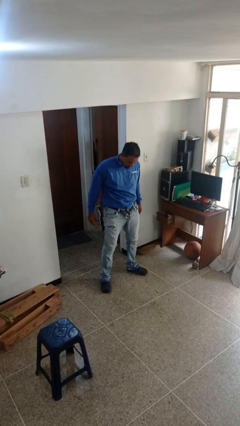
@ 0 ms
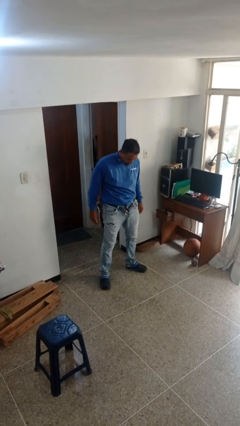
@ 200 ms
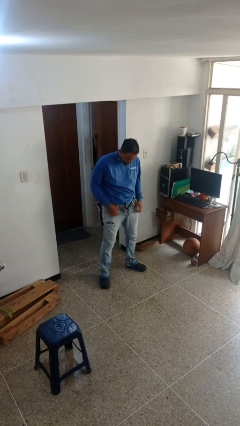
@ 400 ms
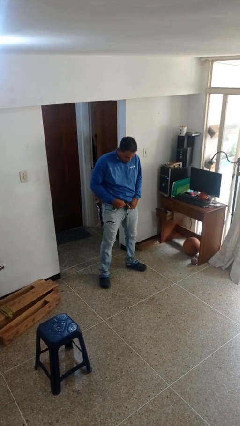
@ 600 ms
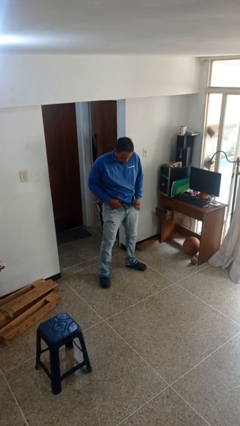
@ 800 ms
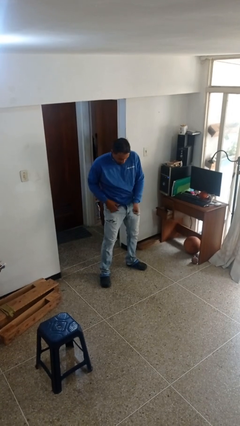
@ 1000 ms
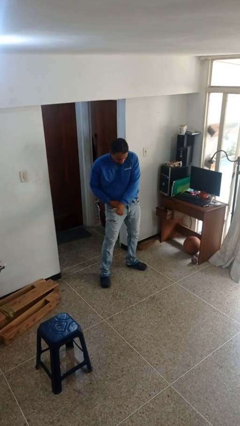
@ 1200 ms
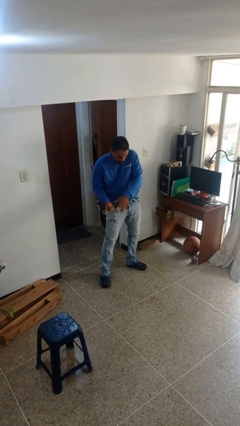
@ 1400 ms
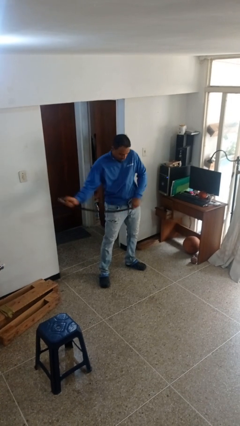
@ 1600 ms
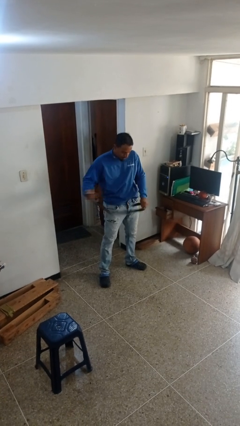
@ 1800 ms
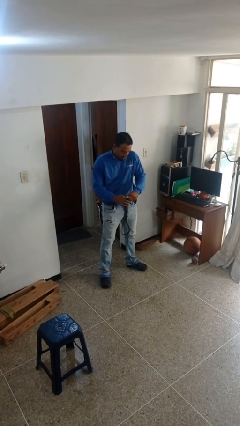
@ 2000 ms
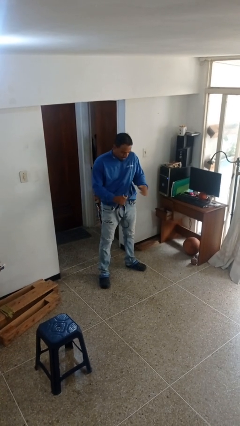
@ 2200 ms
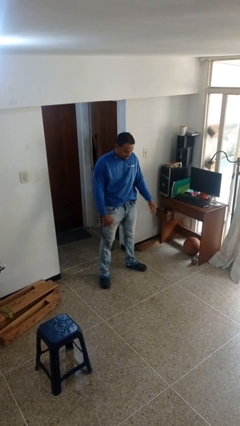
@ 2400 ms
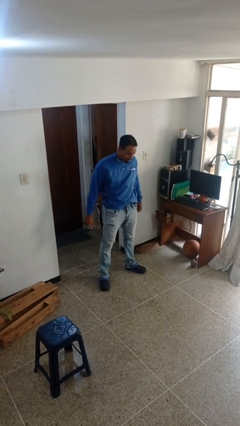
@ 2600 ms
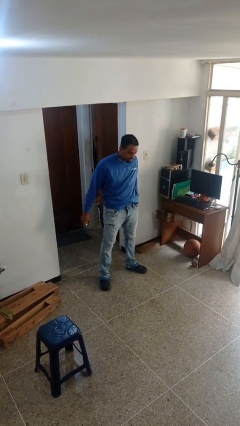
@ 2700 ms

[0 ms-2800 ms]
person takes off belt

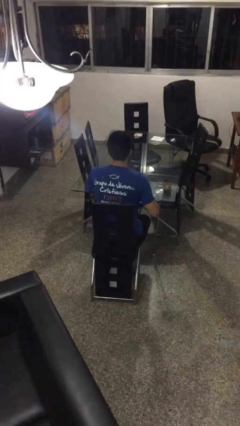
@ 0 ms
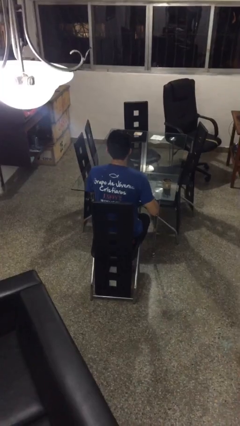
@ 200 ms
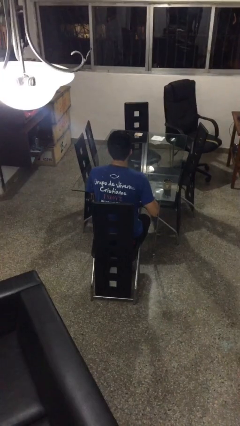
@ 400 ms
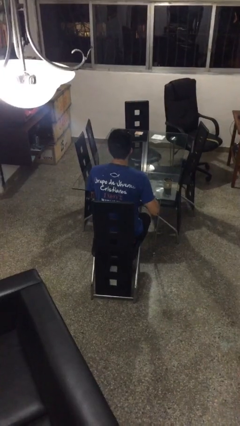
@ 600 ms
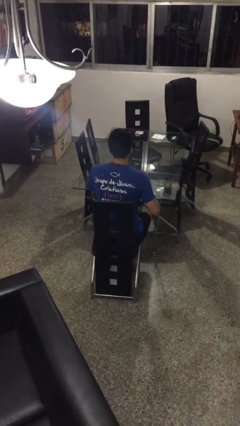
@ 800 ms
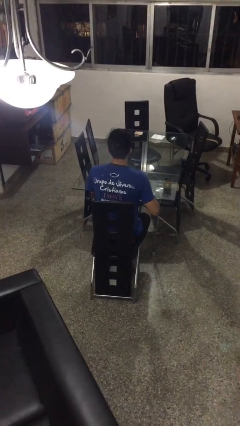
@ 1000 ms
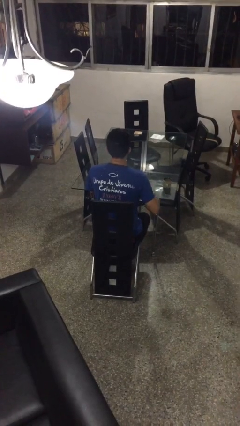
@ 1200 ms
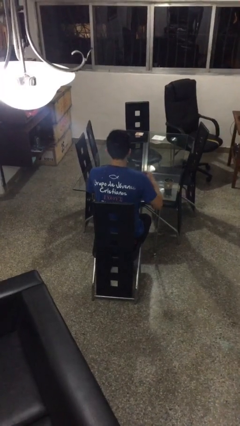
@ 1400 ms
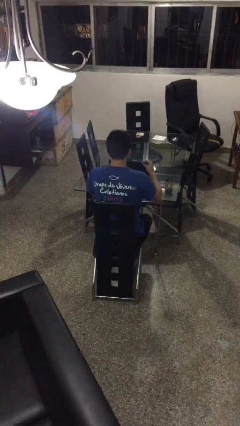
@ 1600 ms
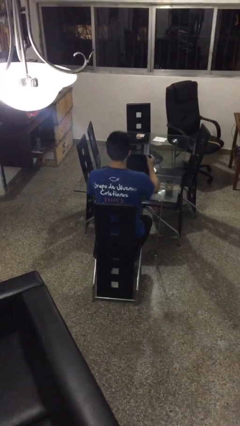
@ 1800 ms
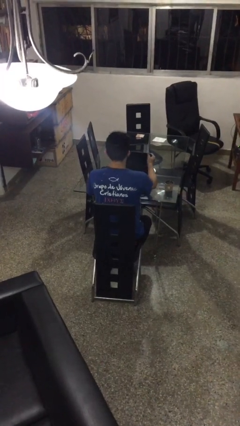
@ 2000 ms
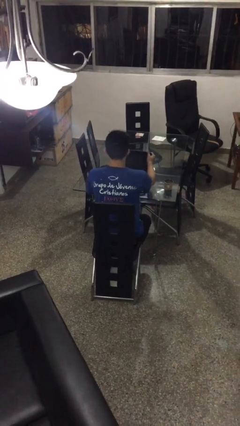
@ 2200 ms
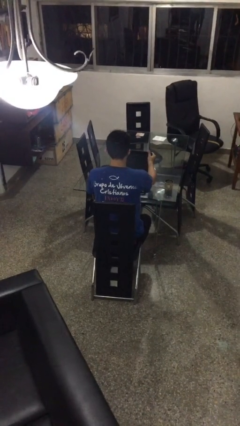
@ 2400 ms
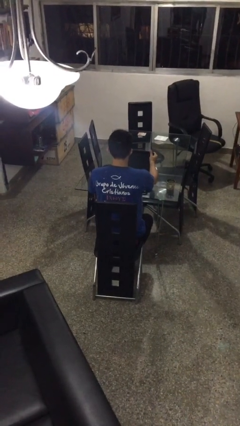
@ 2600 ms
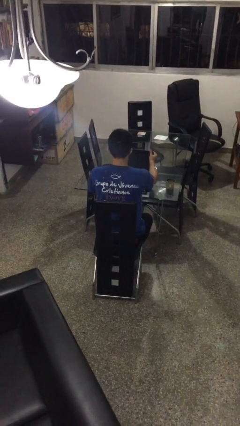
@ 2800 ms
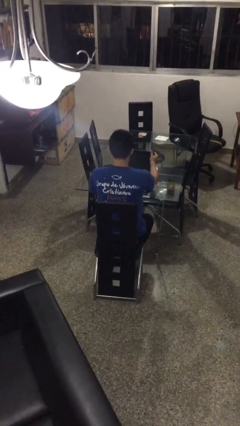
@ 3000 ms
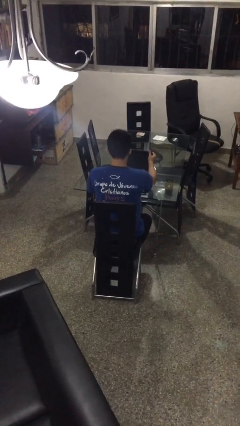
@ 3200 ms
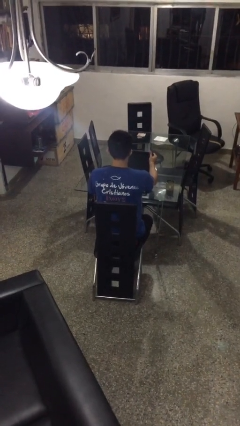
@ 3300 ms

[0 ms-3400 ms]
person opens laptop

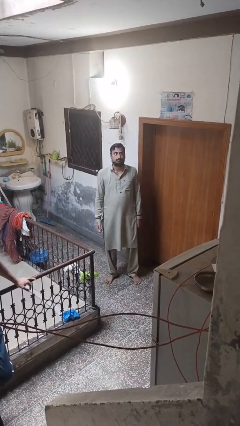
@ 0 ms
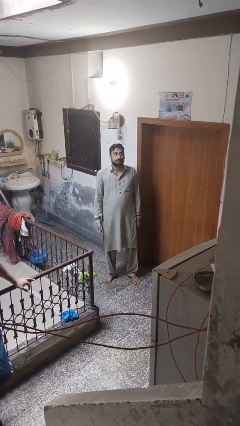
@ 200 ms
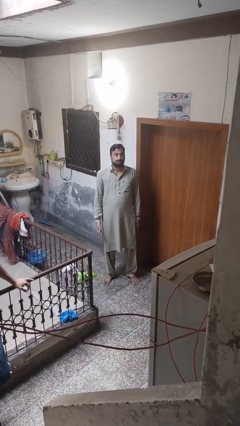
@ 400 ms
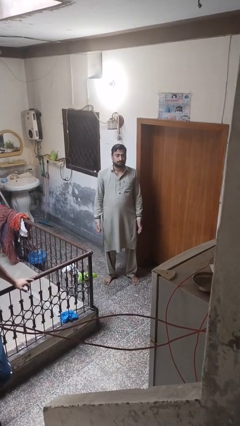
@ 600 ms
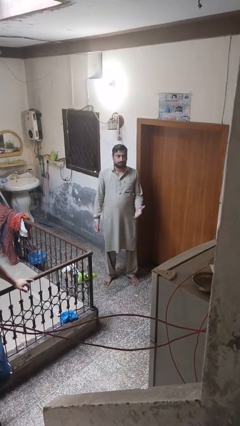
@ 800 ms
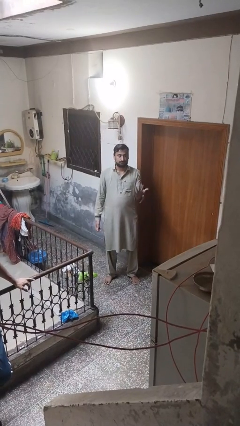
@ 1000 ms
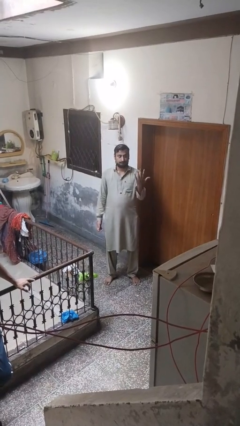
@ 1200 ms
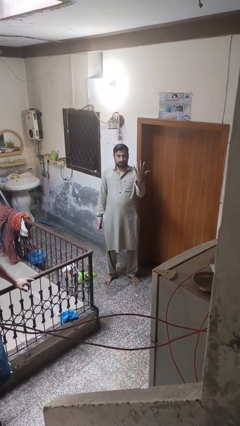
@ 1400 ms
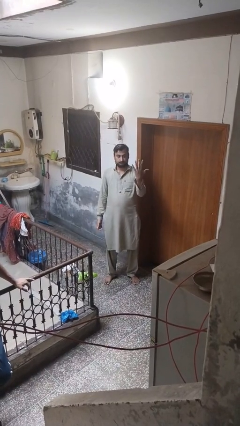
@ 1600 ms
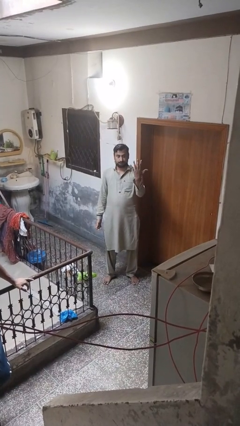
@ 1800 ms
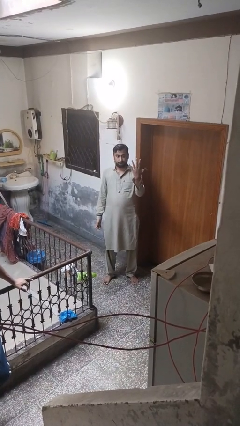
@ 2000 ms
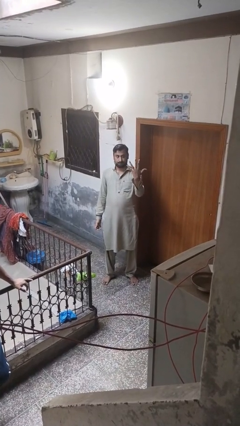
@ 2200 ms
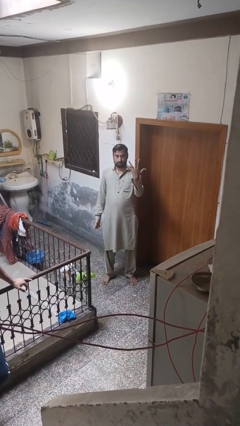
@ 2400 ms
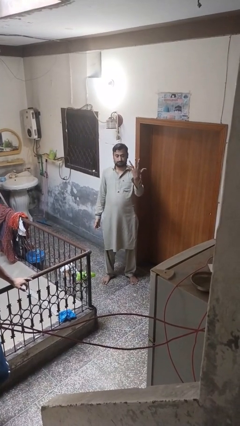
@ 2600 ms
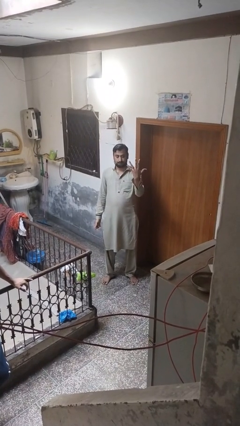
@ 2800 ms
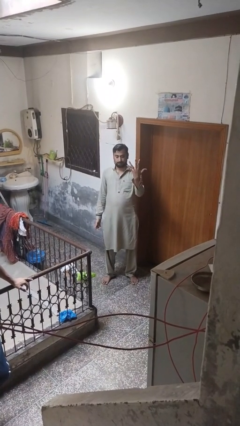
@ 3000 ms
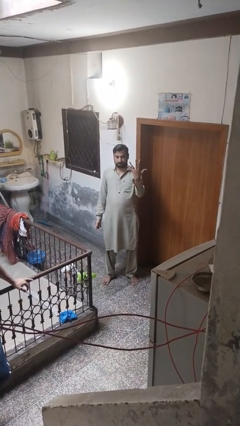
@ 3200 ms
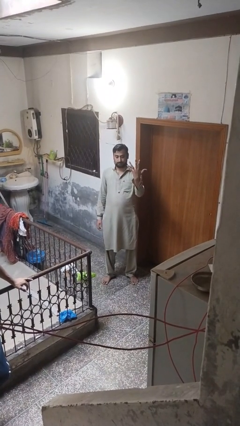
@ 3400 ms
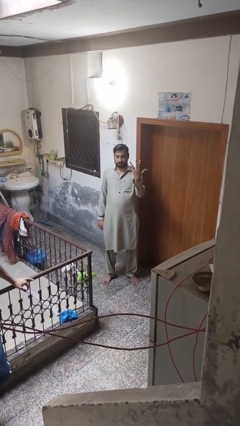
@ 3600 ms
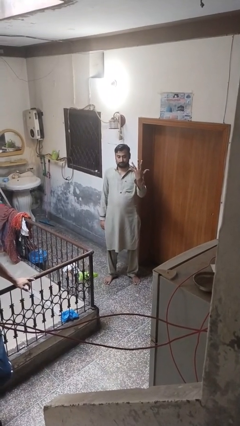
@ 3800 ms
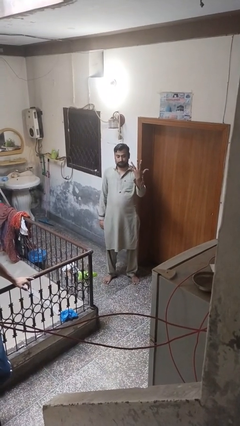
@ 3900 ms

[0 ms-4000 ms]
person gestures number five

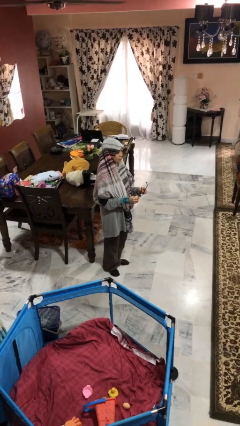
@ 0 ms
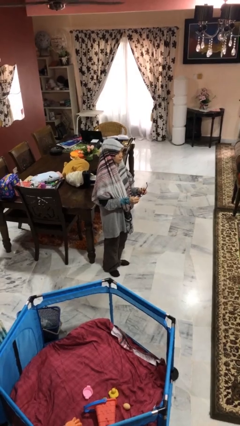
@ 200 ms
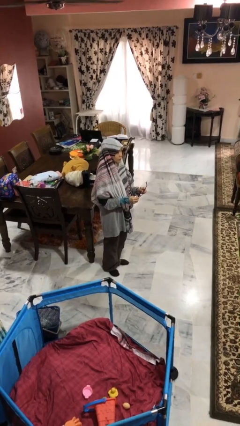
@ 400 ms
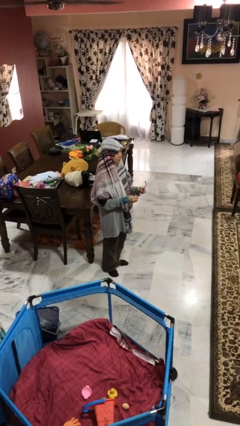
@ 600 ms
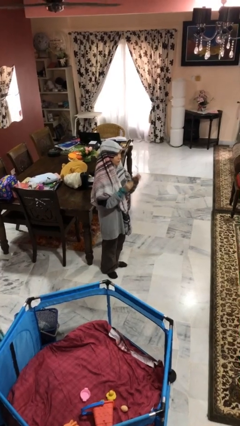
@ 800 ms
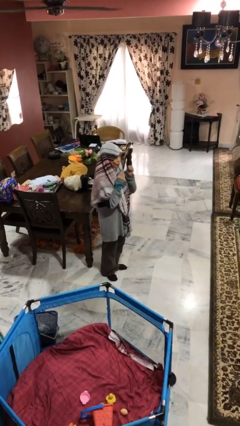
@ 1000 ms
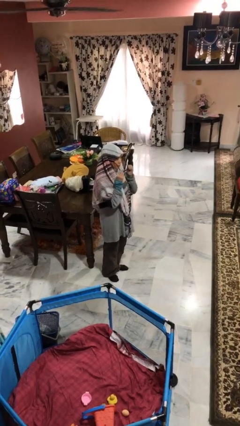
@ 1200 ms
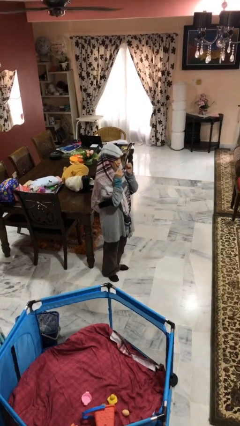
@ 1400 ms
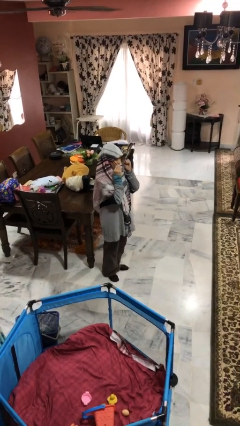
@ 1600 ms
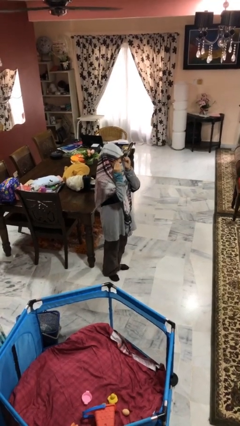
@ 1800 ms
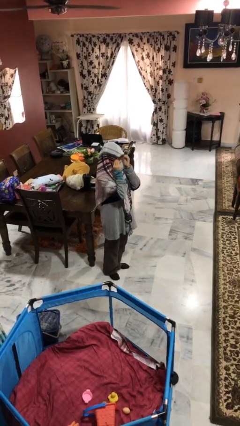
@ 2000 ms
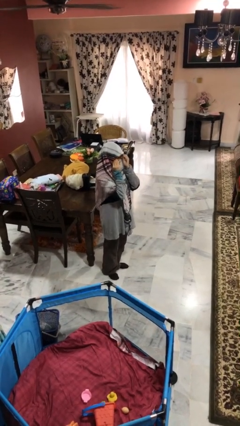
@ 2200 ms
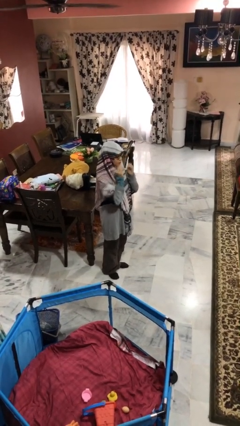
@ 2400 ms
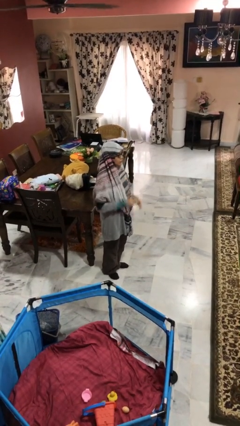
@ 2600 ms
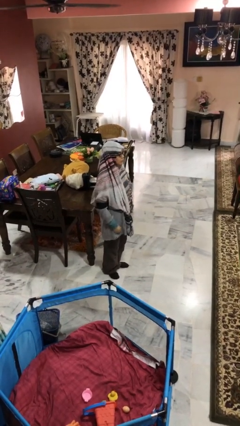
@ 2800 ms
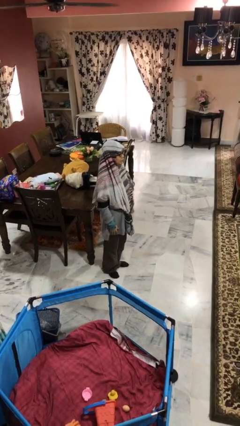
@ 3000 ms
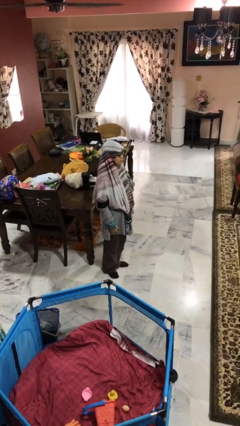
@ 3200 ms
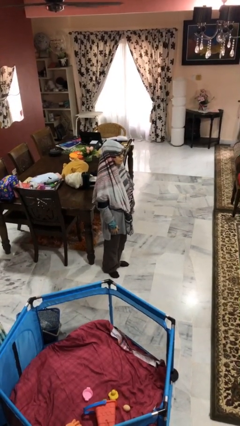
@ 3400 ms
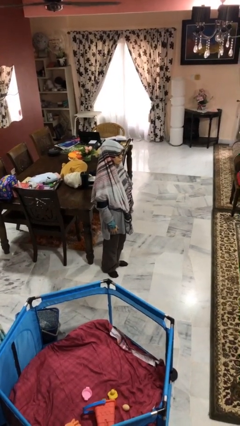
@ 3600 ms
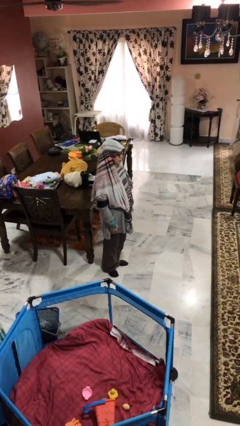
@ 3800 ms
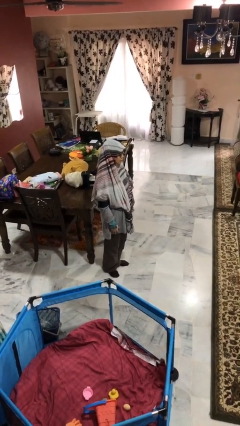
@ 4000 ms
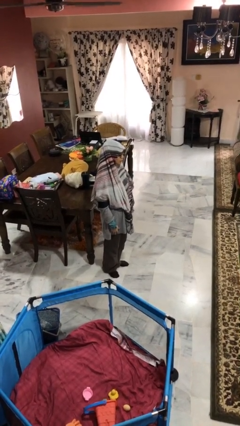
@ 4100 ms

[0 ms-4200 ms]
person puts on glasses

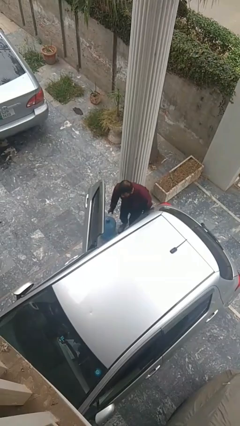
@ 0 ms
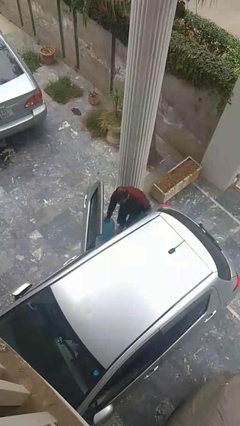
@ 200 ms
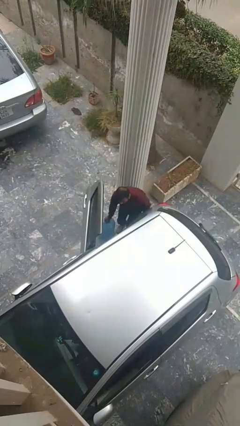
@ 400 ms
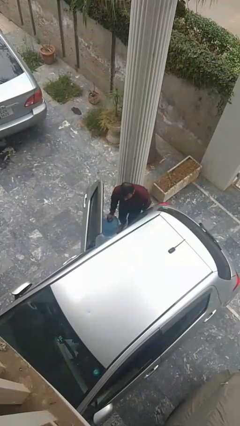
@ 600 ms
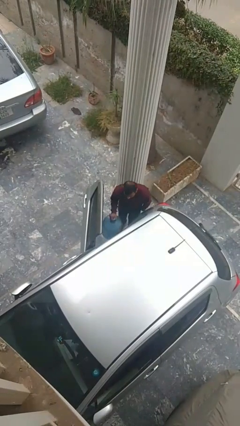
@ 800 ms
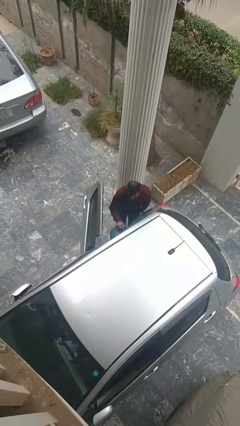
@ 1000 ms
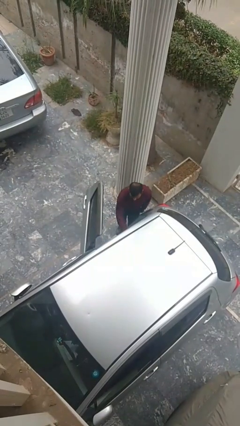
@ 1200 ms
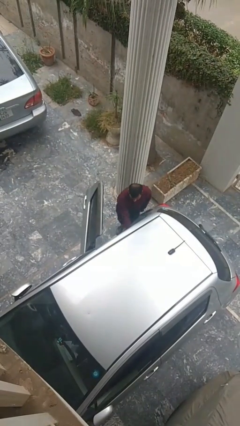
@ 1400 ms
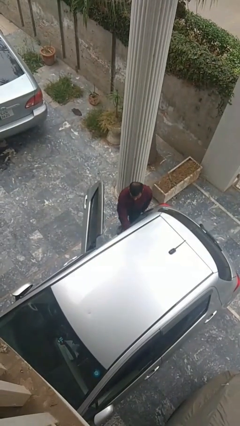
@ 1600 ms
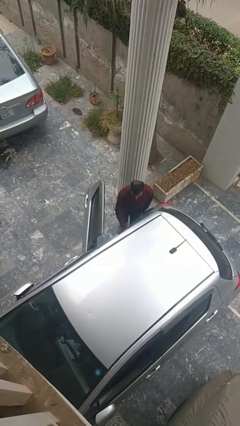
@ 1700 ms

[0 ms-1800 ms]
person loads car

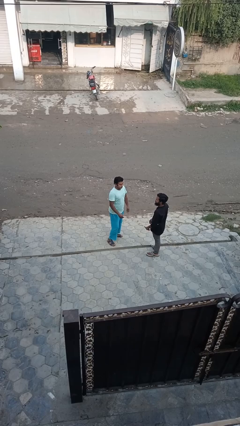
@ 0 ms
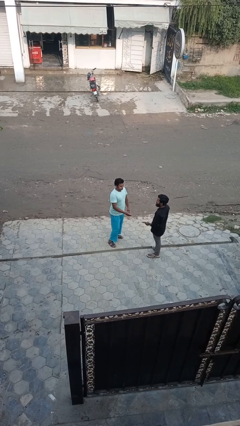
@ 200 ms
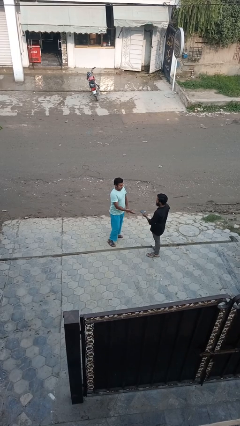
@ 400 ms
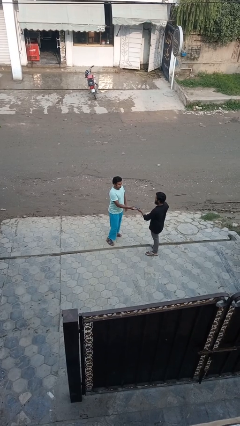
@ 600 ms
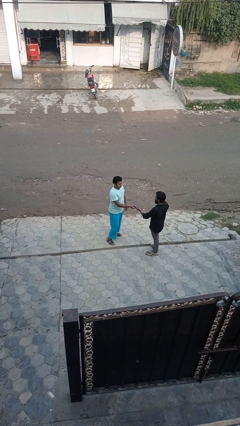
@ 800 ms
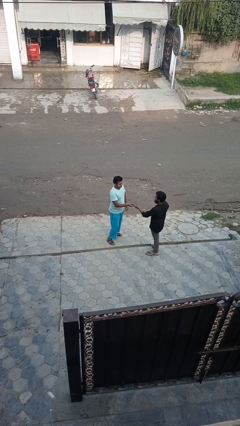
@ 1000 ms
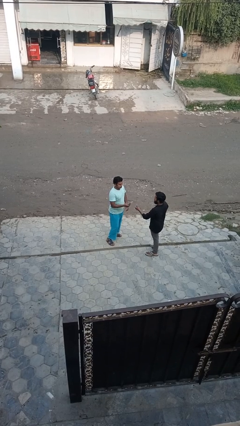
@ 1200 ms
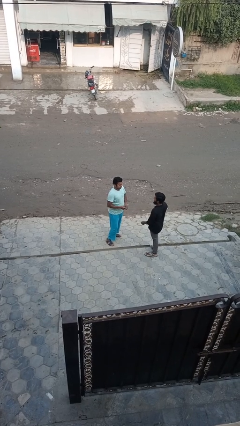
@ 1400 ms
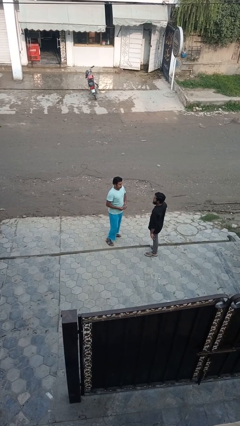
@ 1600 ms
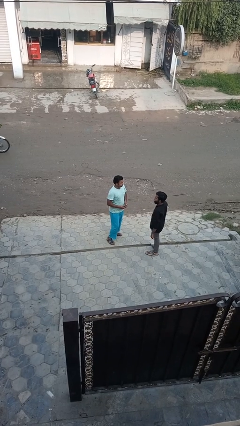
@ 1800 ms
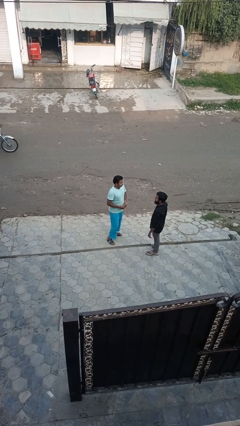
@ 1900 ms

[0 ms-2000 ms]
person transfers object to person
